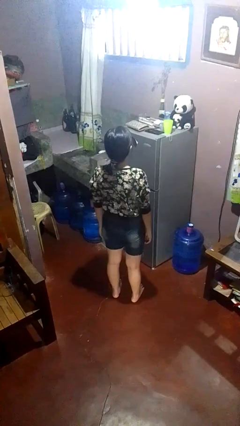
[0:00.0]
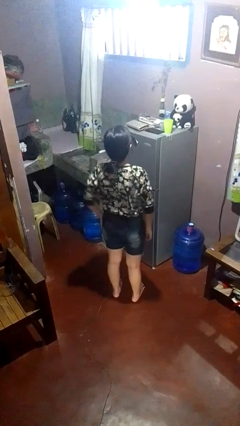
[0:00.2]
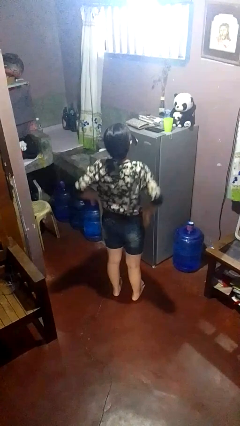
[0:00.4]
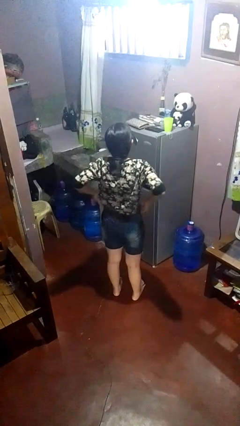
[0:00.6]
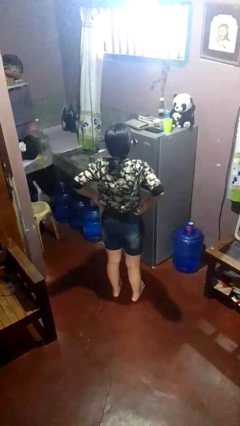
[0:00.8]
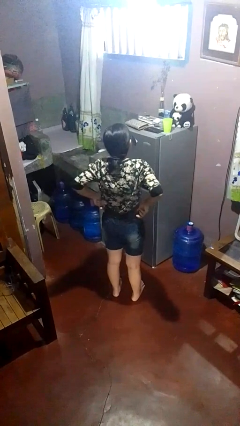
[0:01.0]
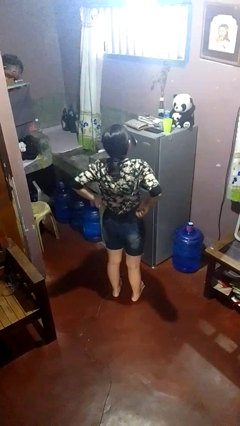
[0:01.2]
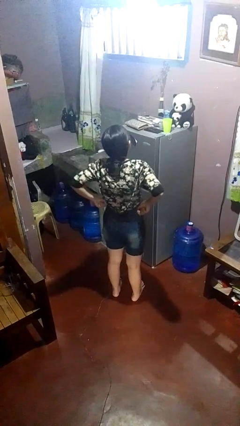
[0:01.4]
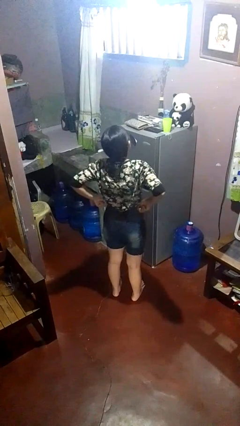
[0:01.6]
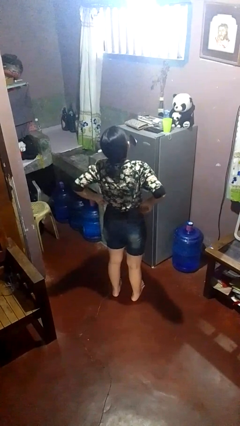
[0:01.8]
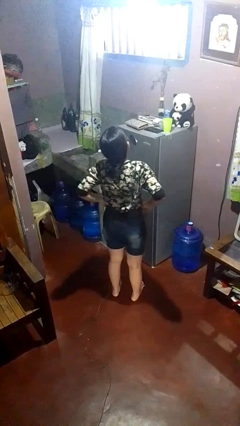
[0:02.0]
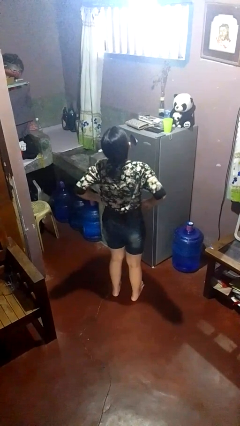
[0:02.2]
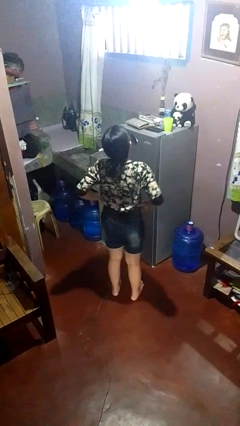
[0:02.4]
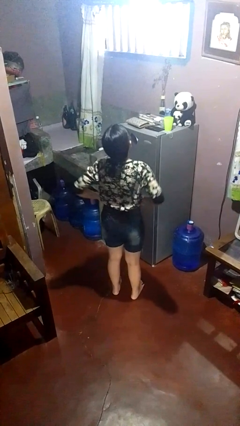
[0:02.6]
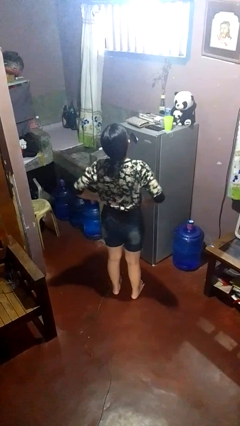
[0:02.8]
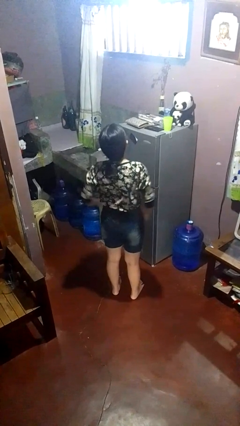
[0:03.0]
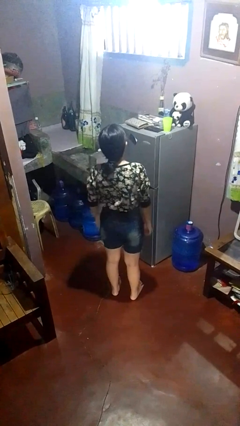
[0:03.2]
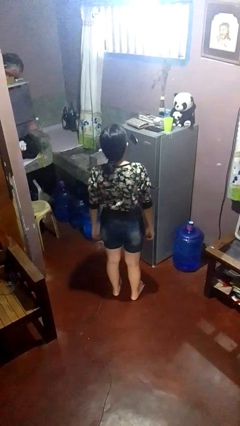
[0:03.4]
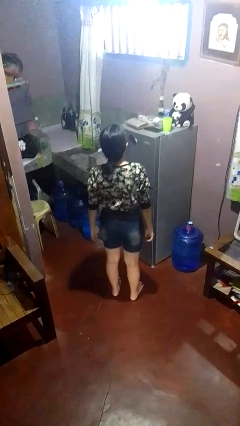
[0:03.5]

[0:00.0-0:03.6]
person hikes up pants

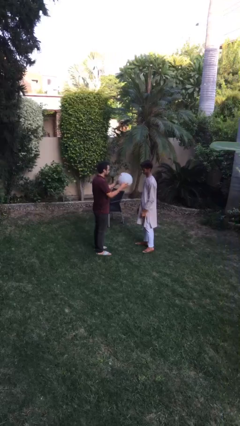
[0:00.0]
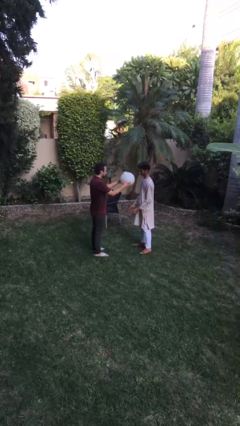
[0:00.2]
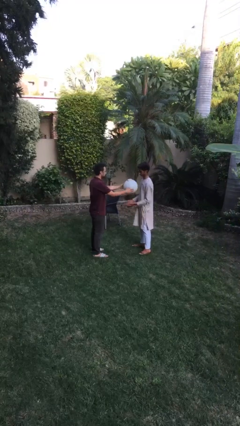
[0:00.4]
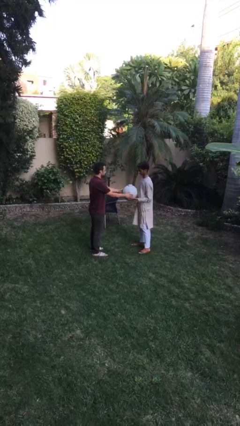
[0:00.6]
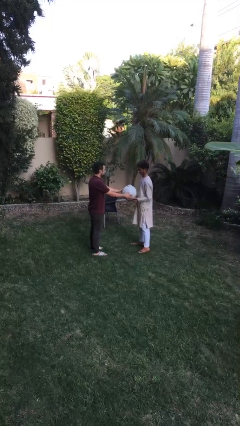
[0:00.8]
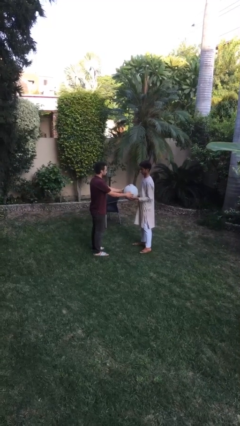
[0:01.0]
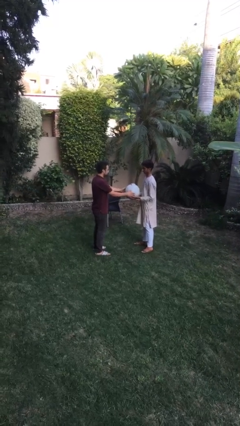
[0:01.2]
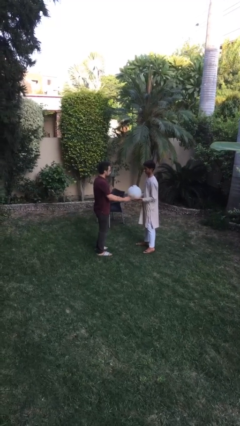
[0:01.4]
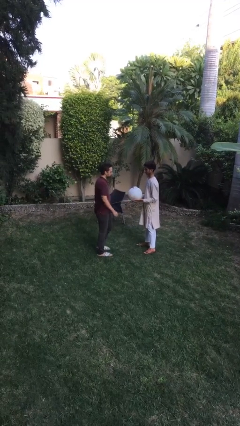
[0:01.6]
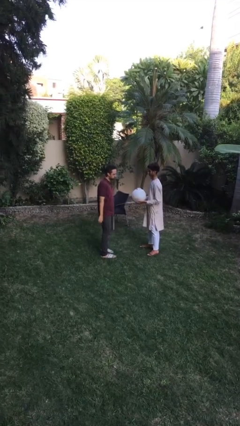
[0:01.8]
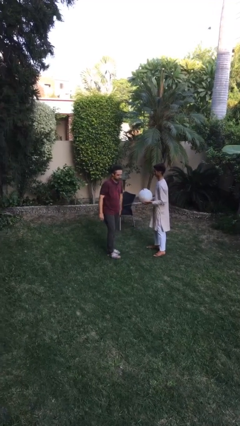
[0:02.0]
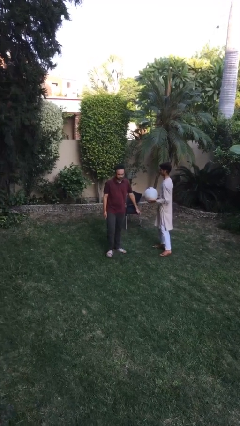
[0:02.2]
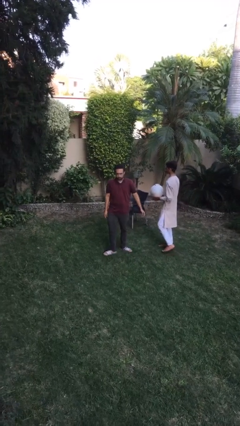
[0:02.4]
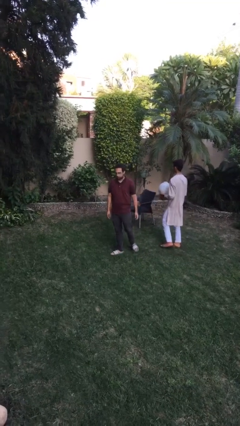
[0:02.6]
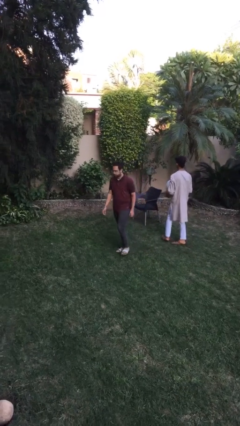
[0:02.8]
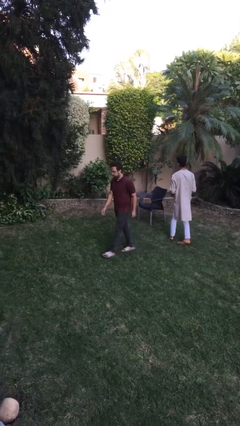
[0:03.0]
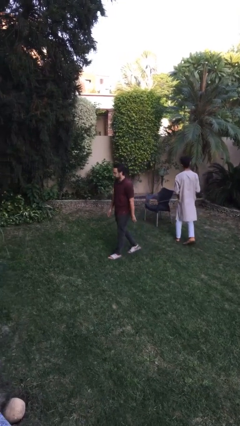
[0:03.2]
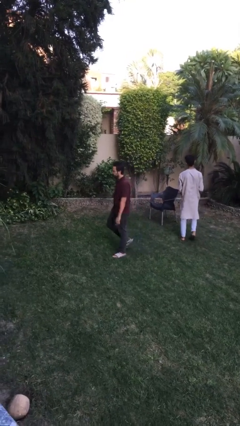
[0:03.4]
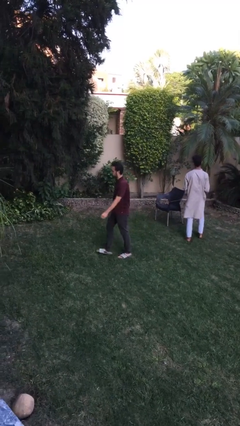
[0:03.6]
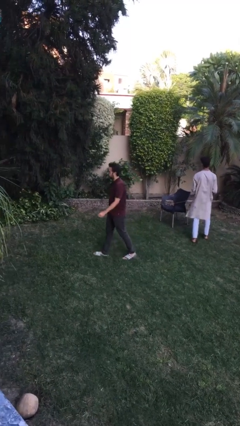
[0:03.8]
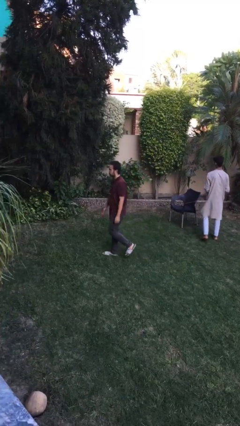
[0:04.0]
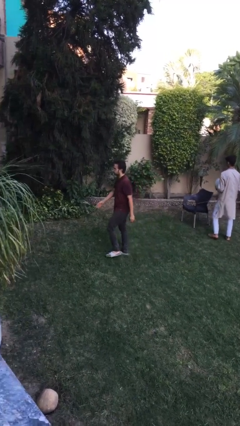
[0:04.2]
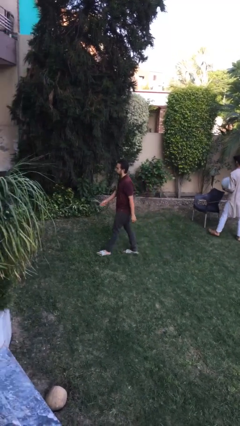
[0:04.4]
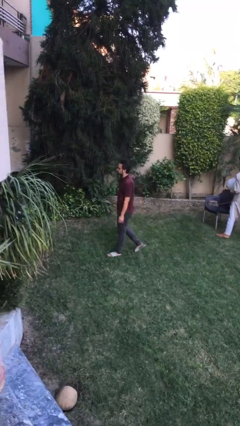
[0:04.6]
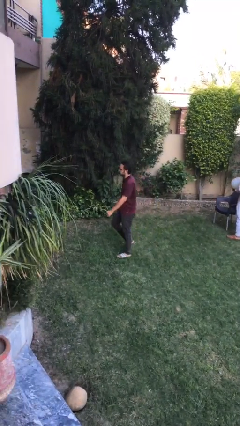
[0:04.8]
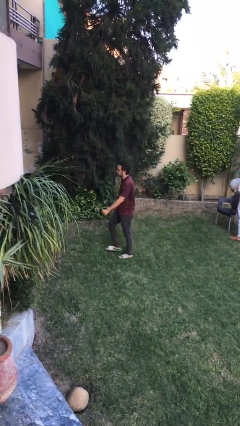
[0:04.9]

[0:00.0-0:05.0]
person transfers object to person

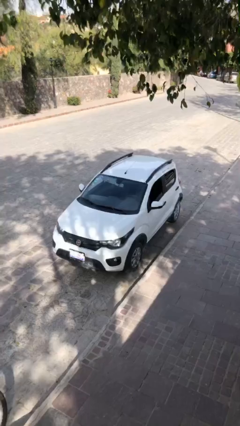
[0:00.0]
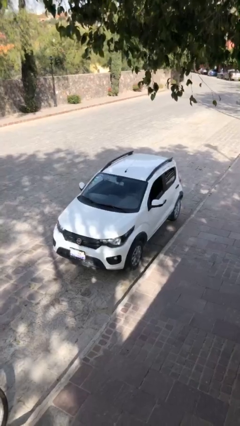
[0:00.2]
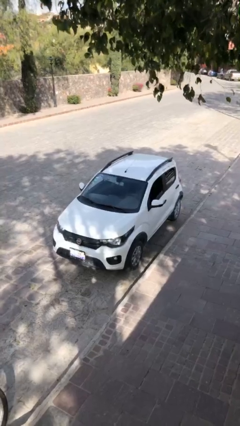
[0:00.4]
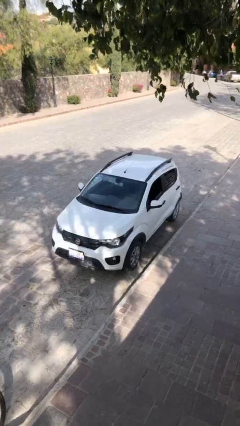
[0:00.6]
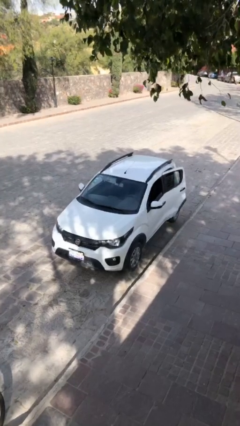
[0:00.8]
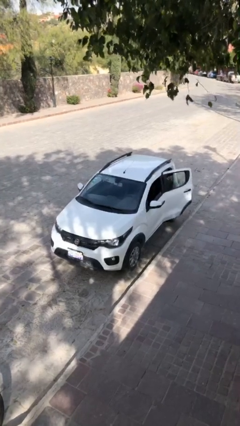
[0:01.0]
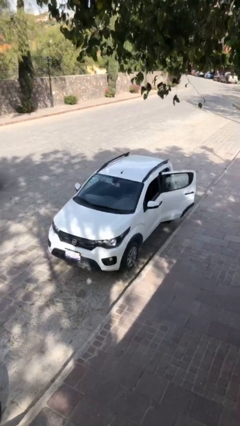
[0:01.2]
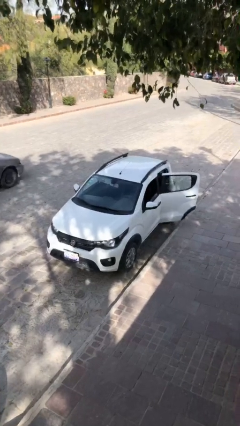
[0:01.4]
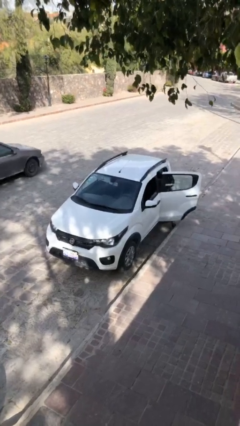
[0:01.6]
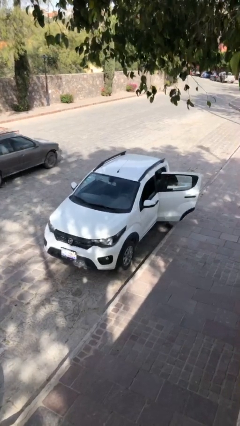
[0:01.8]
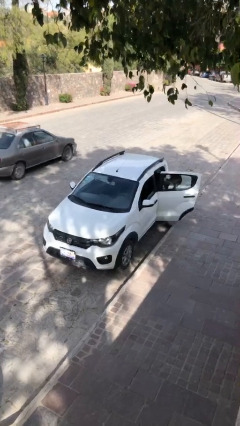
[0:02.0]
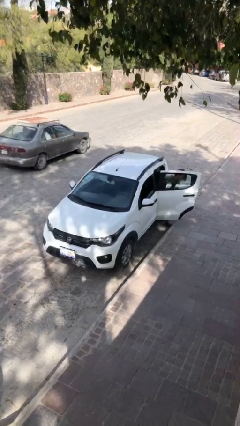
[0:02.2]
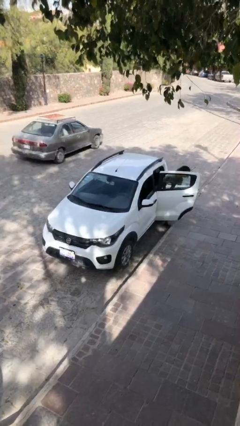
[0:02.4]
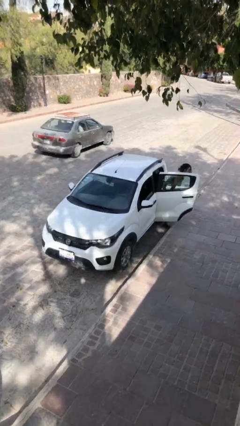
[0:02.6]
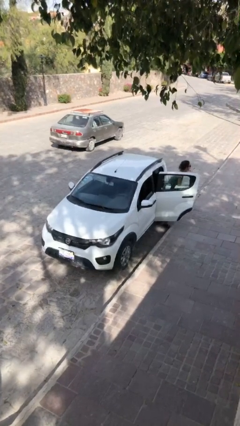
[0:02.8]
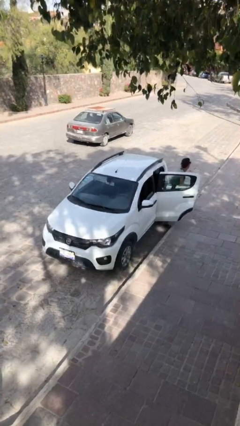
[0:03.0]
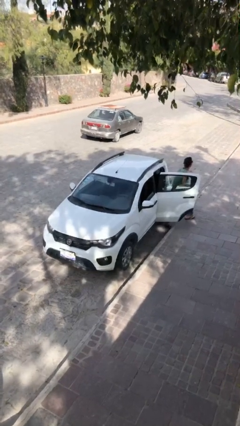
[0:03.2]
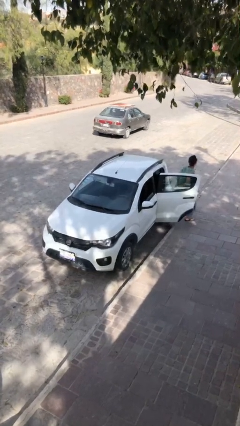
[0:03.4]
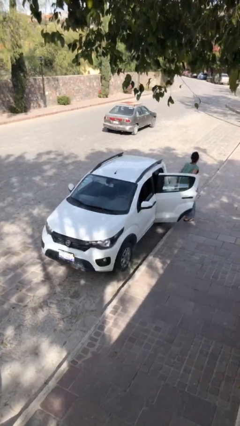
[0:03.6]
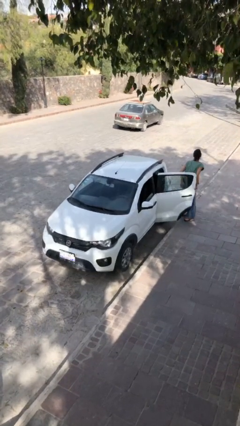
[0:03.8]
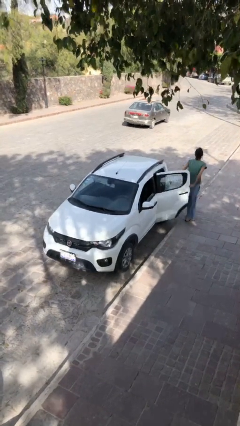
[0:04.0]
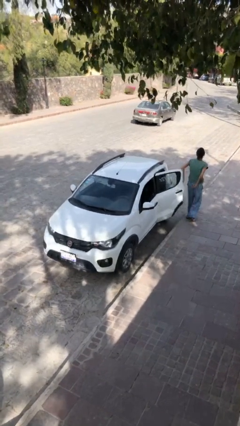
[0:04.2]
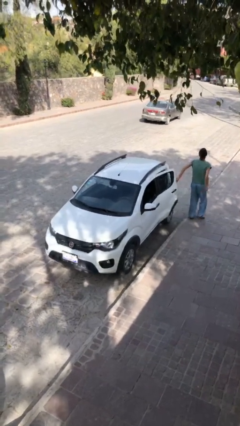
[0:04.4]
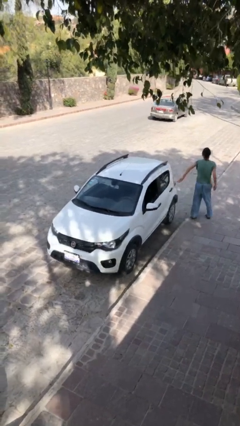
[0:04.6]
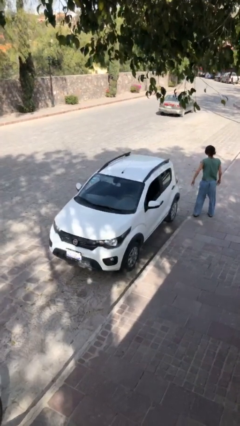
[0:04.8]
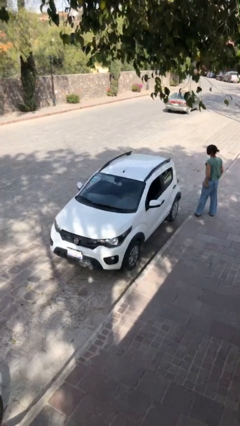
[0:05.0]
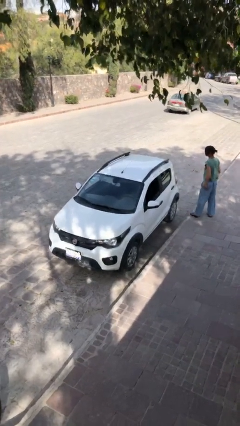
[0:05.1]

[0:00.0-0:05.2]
car drops off person

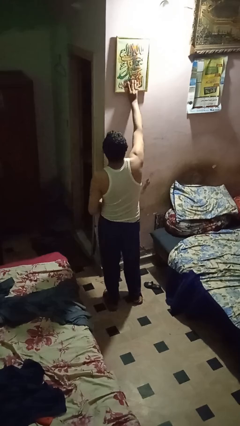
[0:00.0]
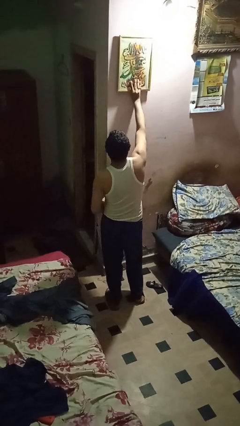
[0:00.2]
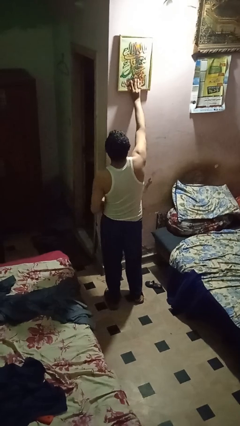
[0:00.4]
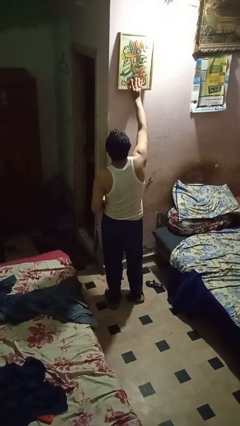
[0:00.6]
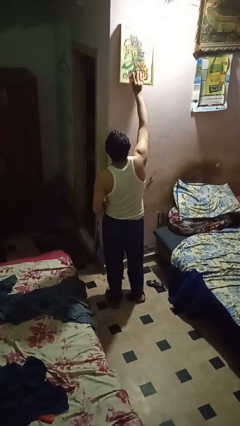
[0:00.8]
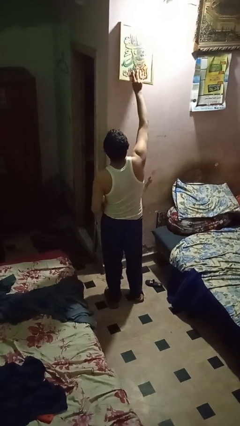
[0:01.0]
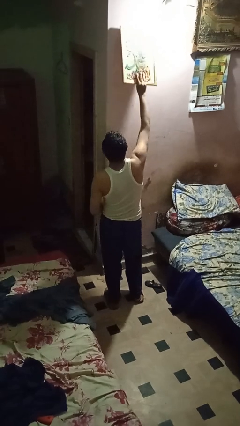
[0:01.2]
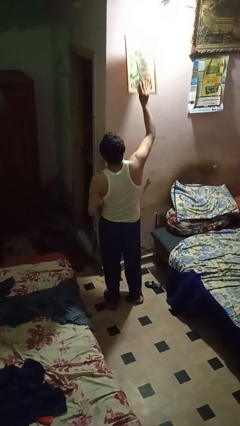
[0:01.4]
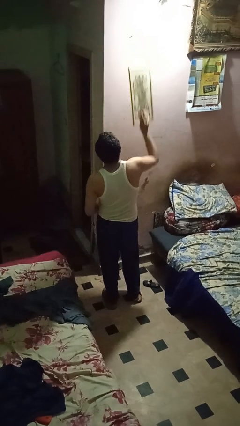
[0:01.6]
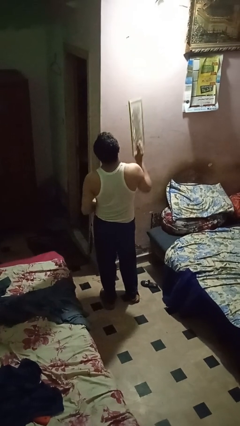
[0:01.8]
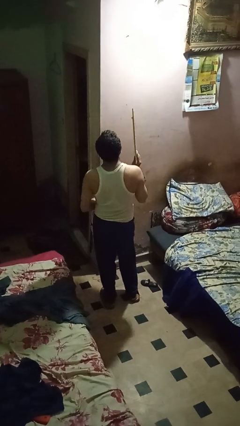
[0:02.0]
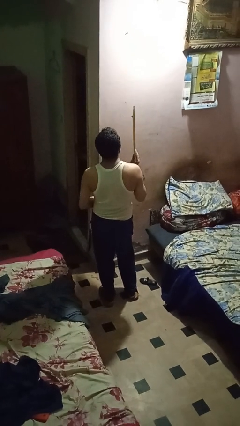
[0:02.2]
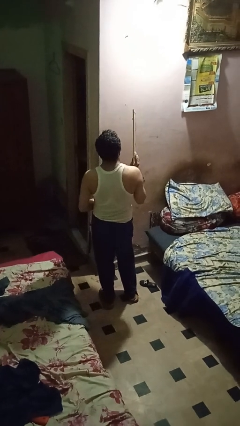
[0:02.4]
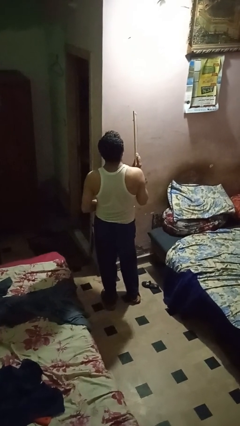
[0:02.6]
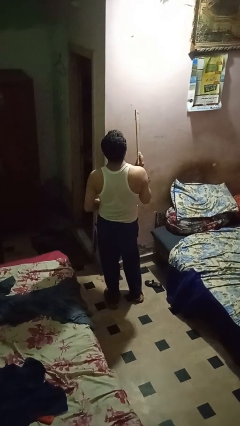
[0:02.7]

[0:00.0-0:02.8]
person takes down picture frame

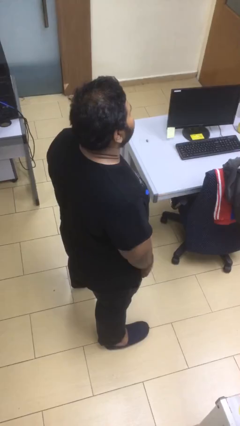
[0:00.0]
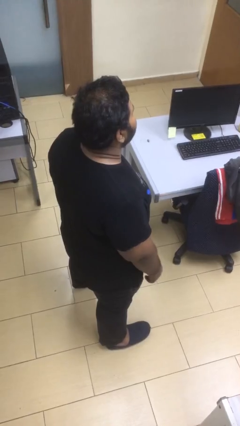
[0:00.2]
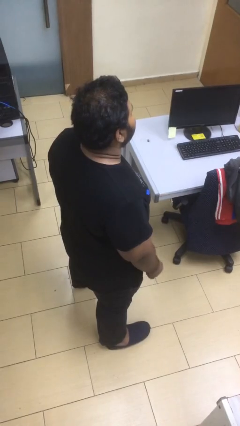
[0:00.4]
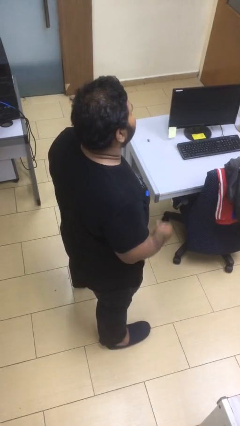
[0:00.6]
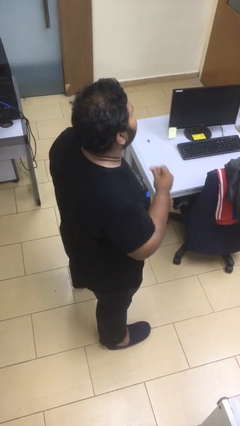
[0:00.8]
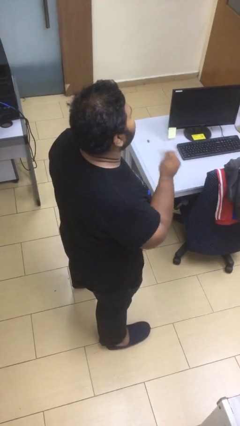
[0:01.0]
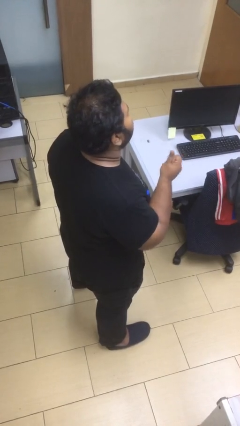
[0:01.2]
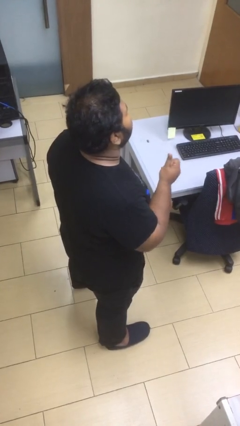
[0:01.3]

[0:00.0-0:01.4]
person snaps fingers
